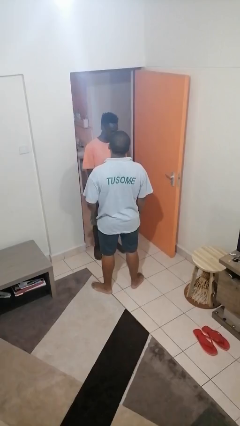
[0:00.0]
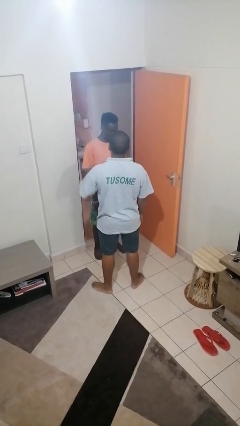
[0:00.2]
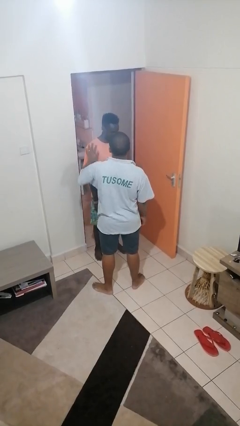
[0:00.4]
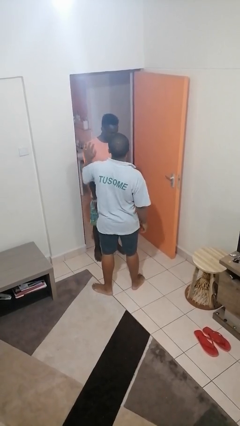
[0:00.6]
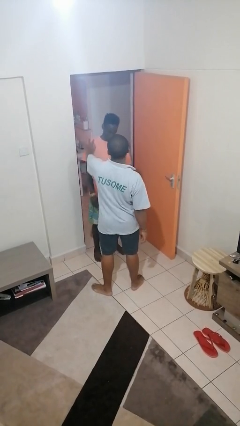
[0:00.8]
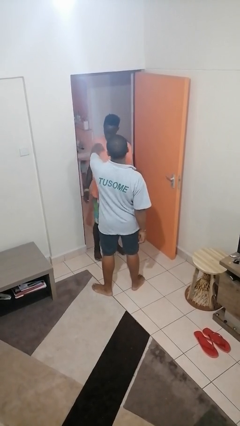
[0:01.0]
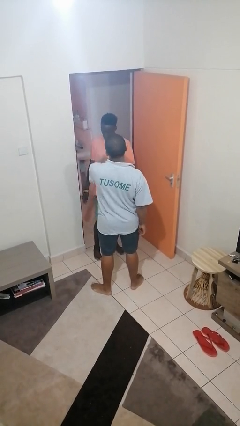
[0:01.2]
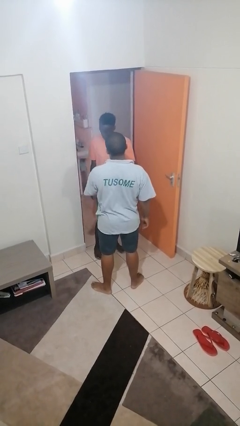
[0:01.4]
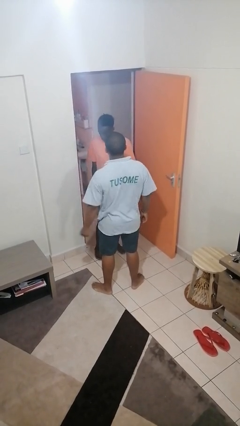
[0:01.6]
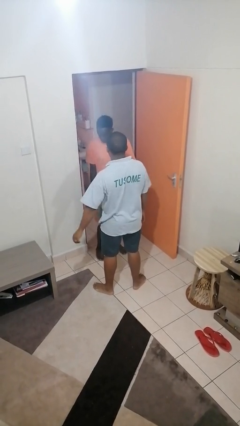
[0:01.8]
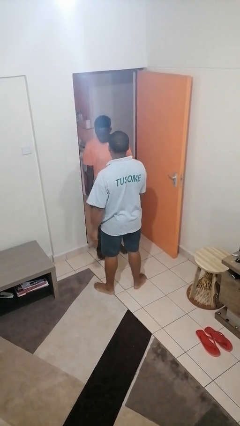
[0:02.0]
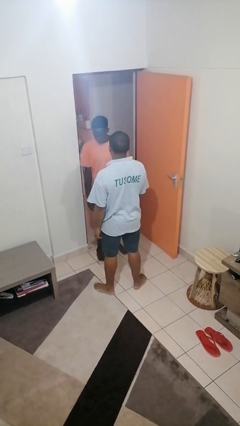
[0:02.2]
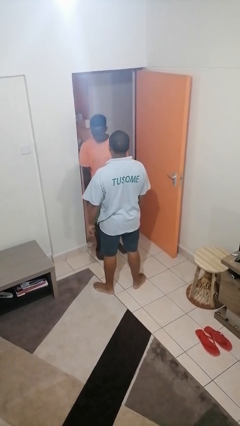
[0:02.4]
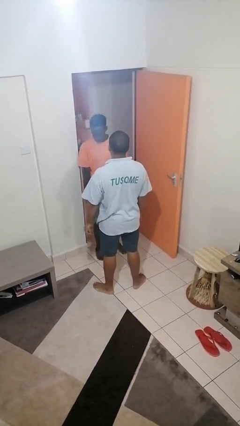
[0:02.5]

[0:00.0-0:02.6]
person shoves person

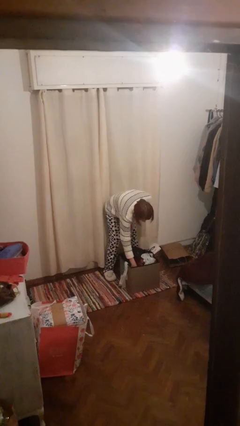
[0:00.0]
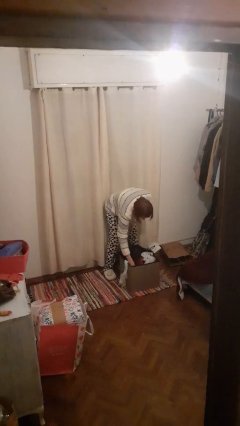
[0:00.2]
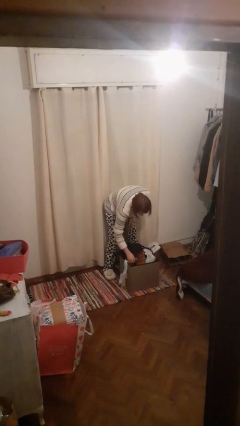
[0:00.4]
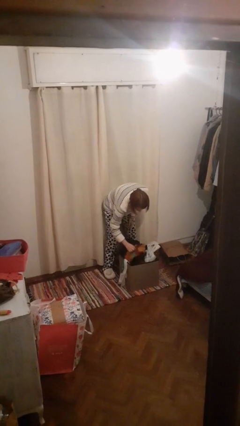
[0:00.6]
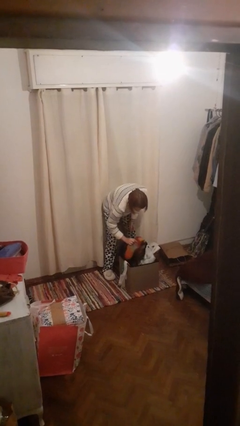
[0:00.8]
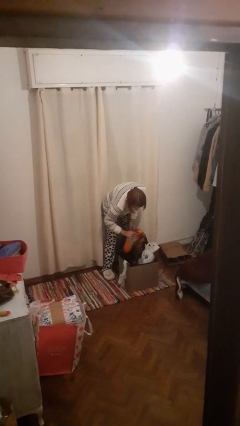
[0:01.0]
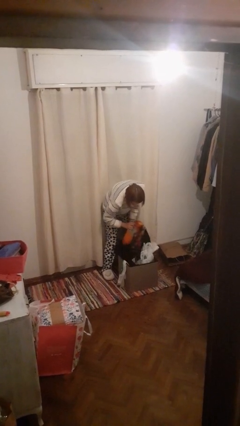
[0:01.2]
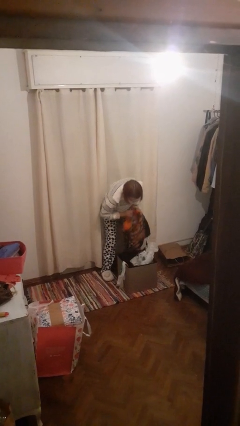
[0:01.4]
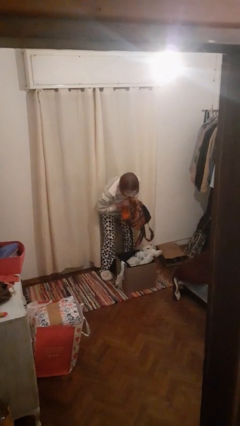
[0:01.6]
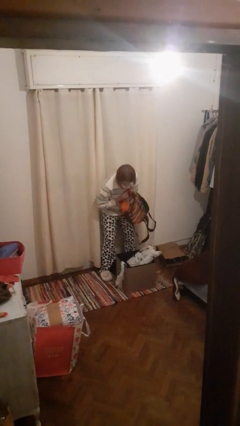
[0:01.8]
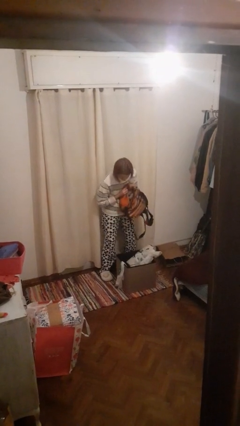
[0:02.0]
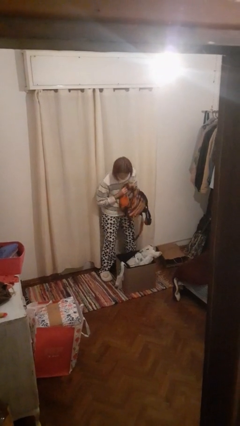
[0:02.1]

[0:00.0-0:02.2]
person takes object from basket

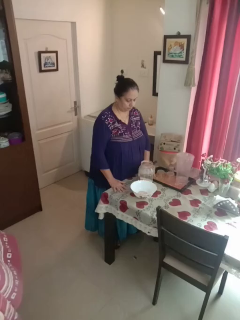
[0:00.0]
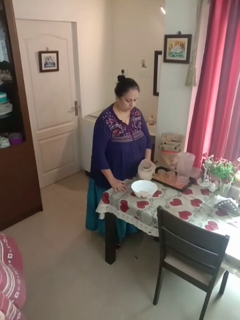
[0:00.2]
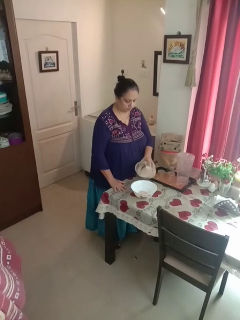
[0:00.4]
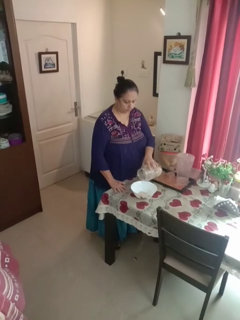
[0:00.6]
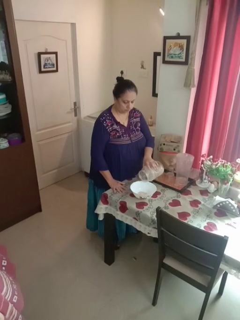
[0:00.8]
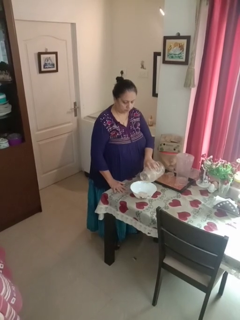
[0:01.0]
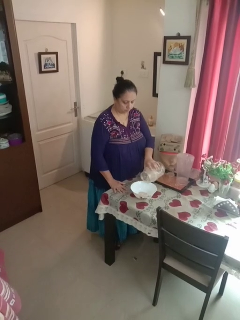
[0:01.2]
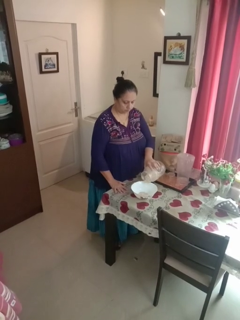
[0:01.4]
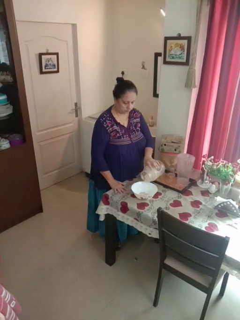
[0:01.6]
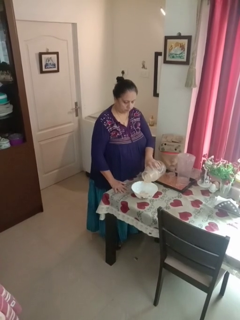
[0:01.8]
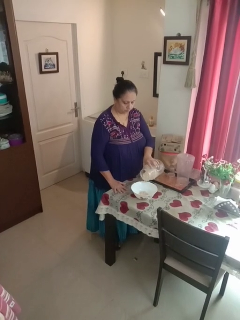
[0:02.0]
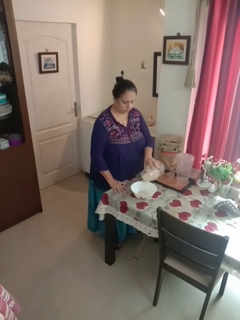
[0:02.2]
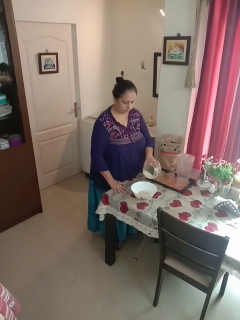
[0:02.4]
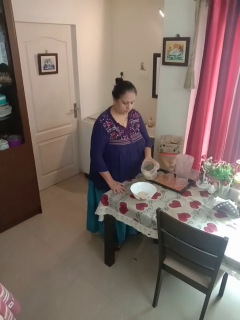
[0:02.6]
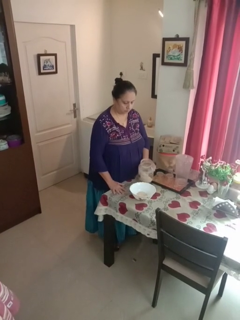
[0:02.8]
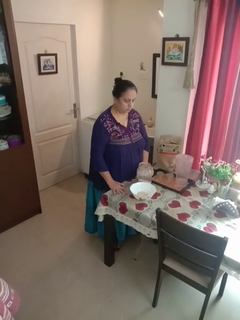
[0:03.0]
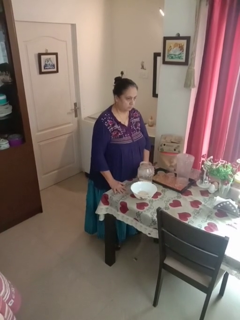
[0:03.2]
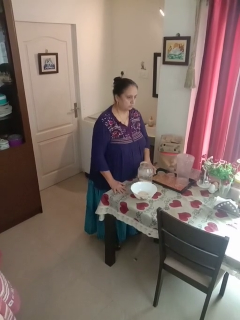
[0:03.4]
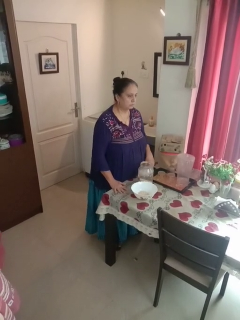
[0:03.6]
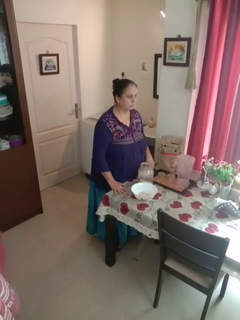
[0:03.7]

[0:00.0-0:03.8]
person pours into bowl

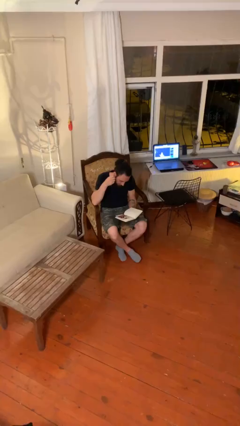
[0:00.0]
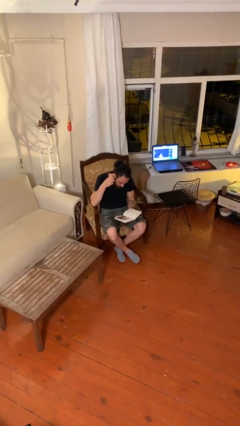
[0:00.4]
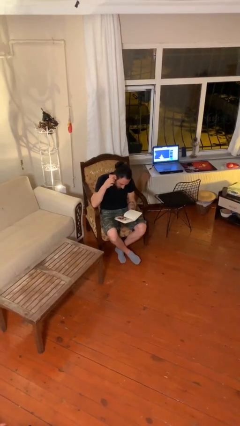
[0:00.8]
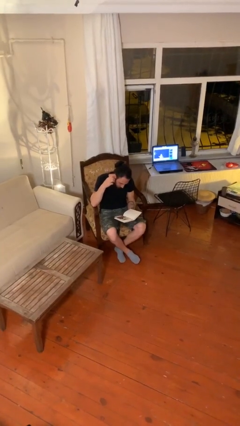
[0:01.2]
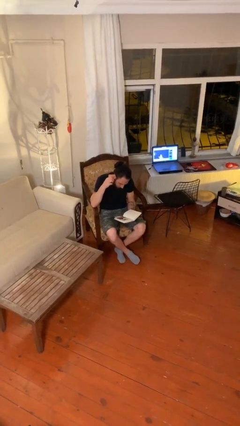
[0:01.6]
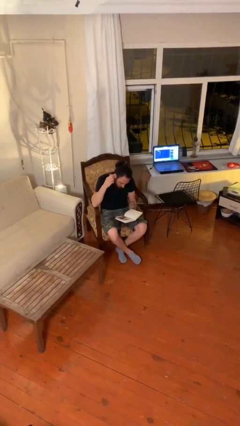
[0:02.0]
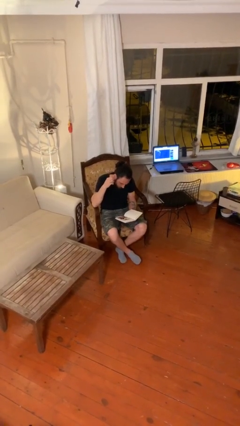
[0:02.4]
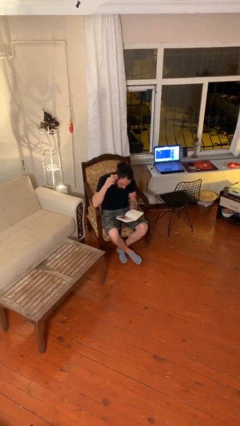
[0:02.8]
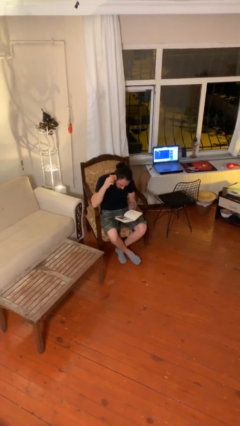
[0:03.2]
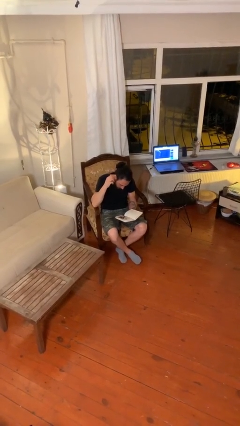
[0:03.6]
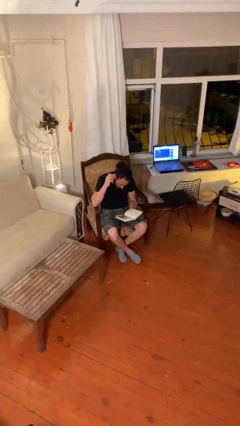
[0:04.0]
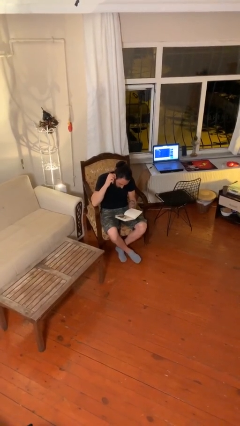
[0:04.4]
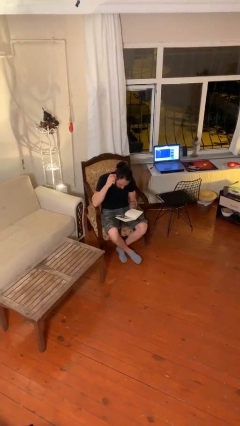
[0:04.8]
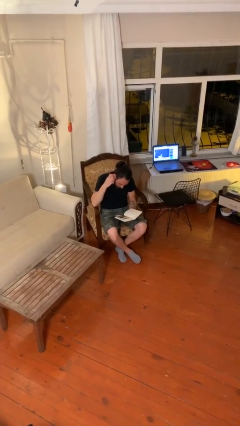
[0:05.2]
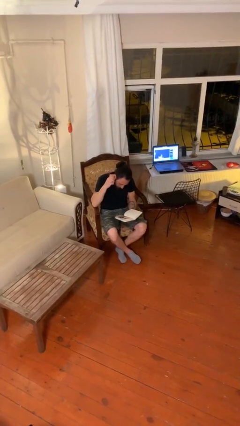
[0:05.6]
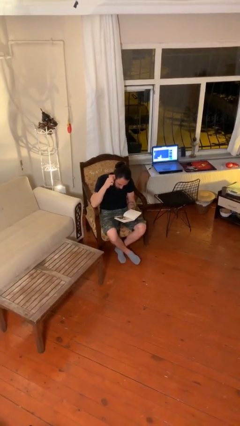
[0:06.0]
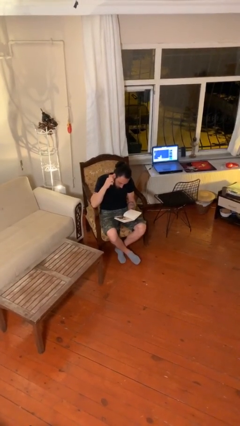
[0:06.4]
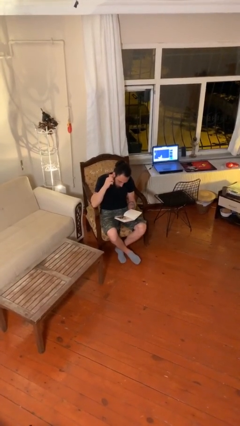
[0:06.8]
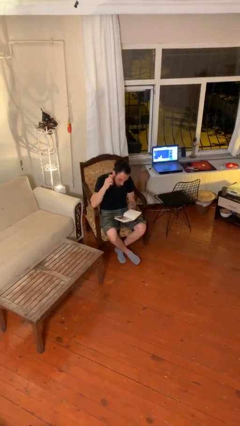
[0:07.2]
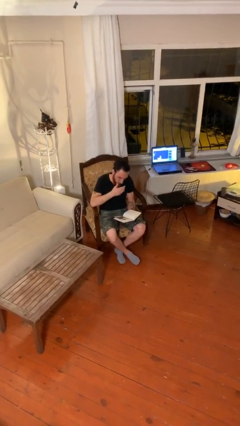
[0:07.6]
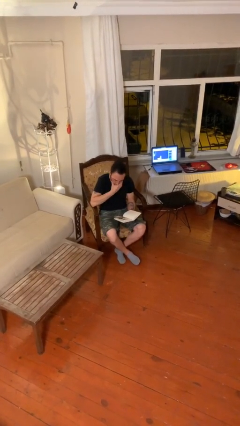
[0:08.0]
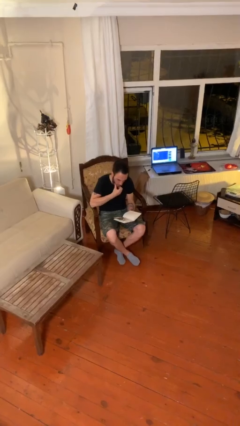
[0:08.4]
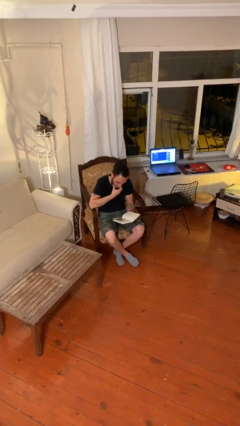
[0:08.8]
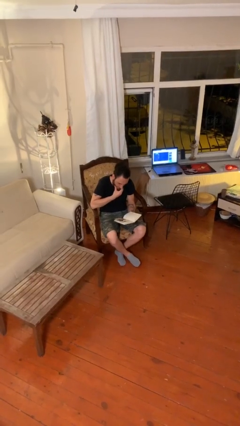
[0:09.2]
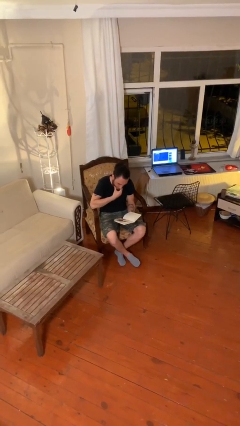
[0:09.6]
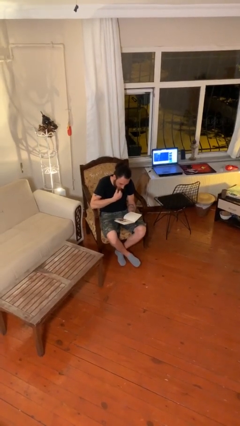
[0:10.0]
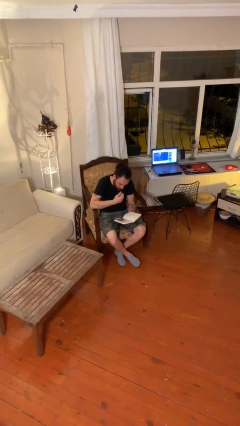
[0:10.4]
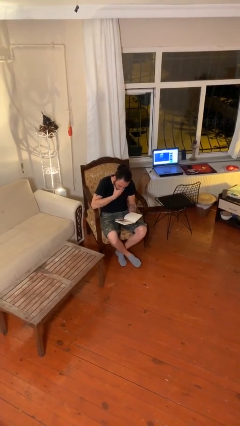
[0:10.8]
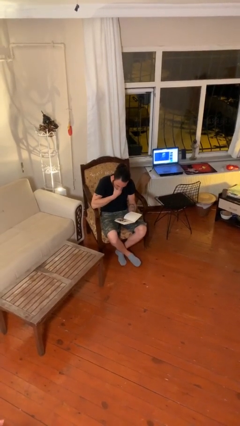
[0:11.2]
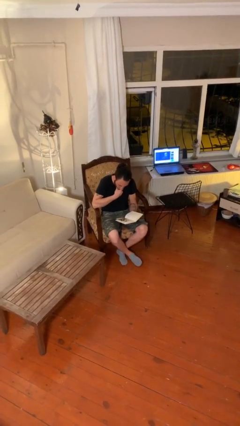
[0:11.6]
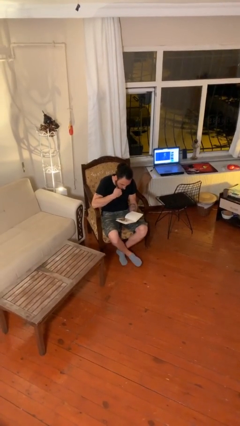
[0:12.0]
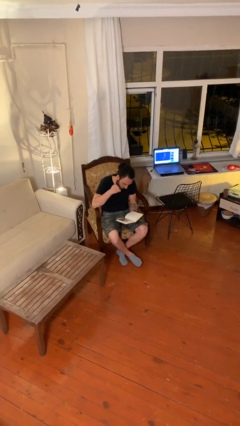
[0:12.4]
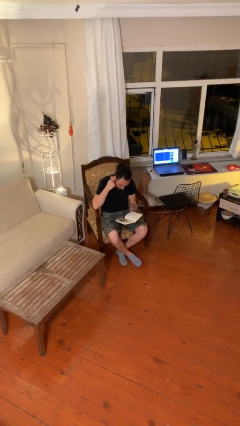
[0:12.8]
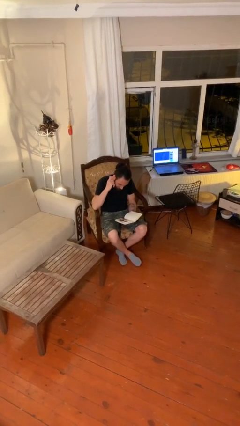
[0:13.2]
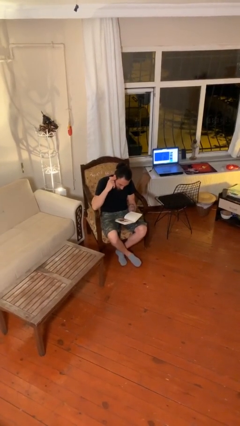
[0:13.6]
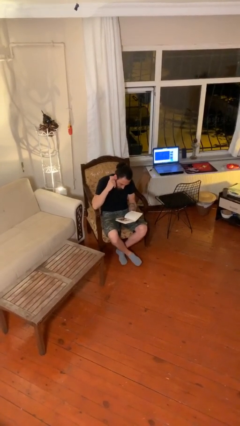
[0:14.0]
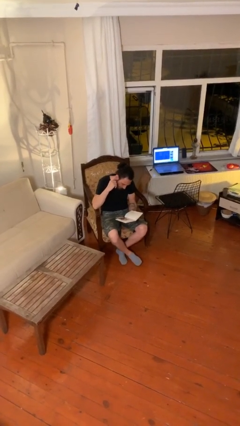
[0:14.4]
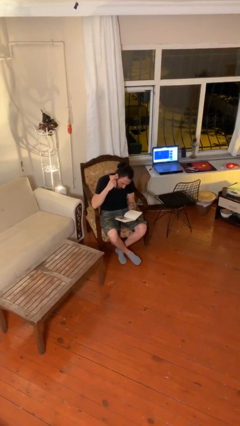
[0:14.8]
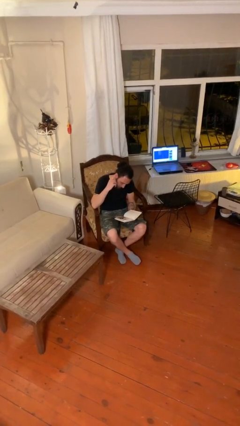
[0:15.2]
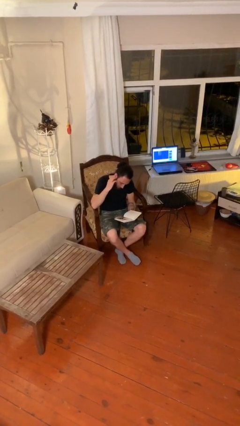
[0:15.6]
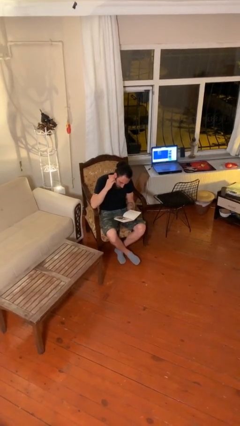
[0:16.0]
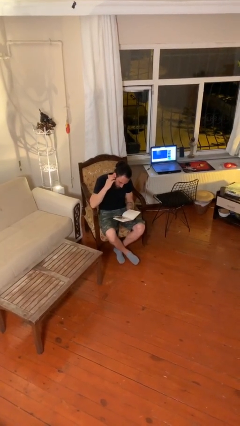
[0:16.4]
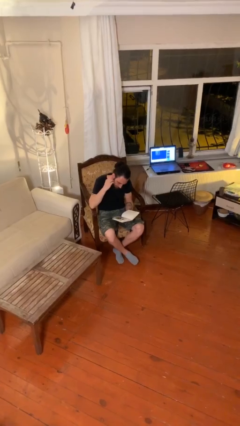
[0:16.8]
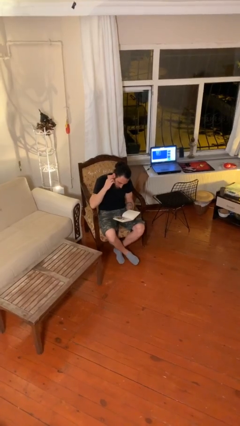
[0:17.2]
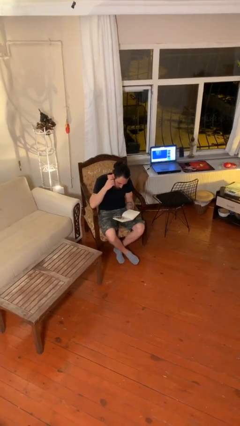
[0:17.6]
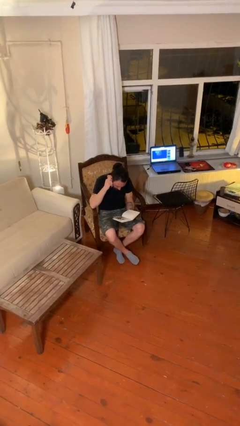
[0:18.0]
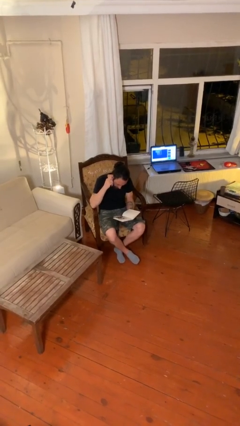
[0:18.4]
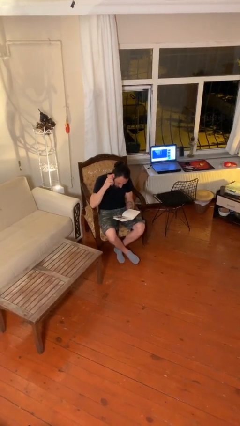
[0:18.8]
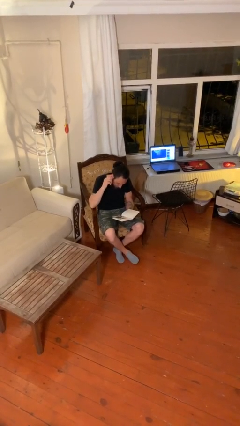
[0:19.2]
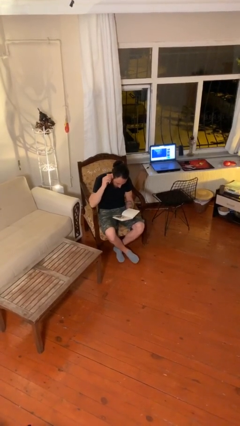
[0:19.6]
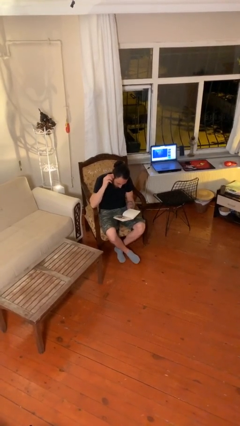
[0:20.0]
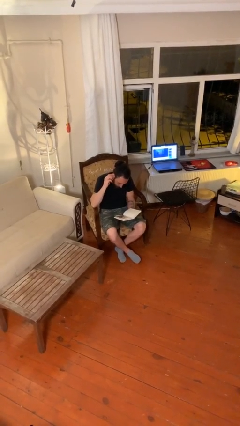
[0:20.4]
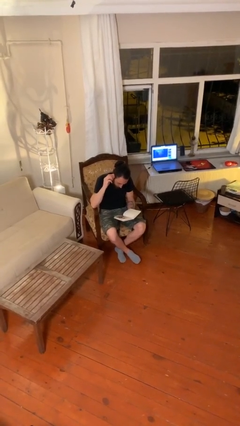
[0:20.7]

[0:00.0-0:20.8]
person reads document
